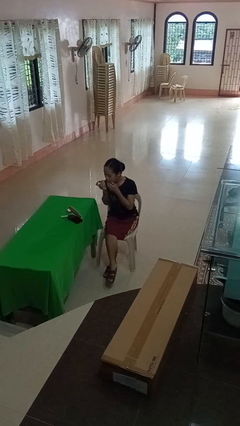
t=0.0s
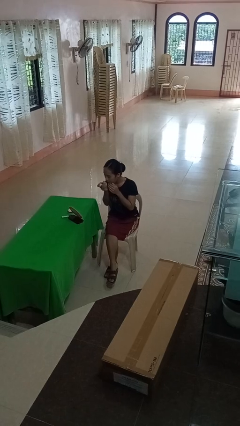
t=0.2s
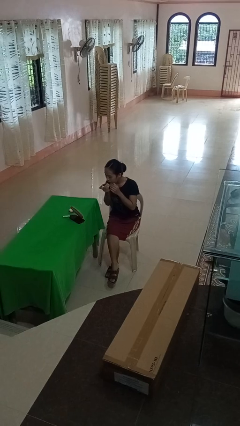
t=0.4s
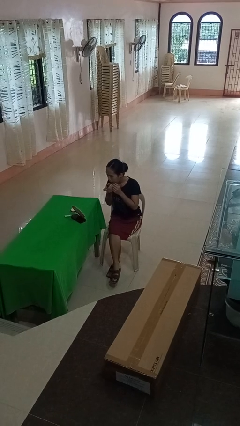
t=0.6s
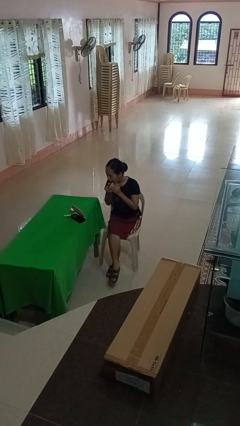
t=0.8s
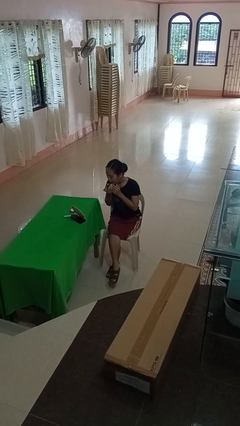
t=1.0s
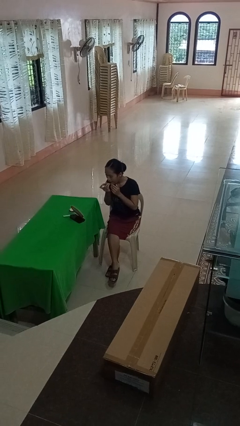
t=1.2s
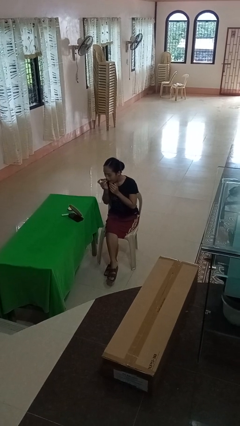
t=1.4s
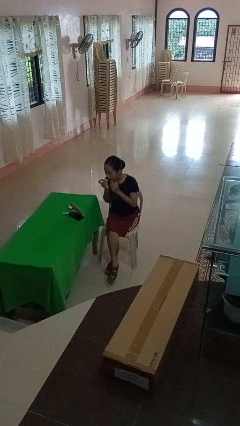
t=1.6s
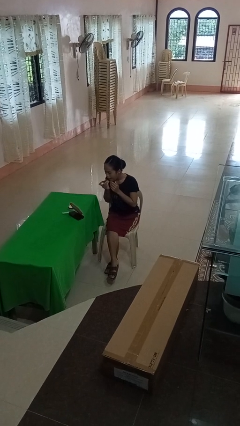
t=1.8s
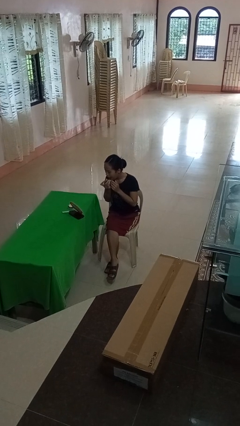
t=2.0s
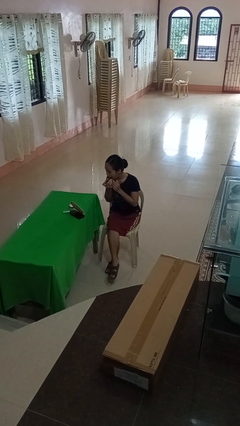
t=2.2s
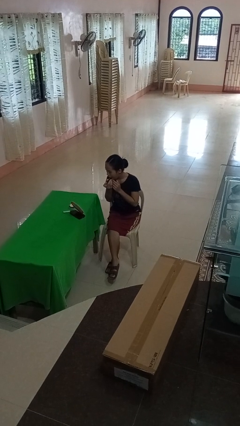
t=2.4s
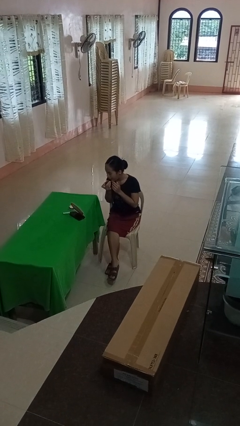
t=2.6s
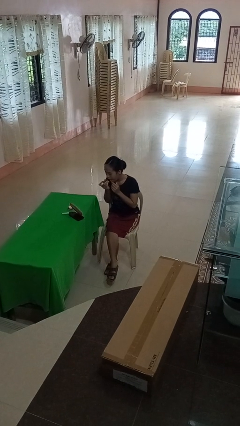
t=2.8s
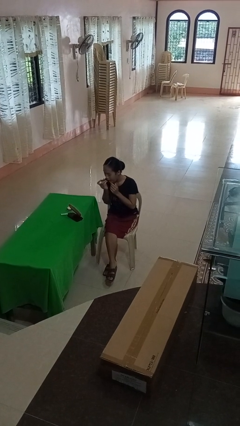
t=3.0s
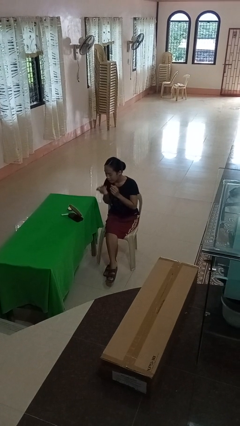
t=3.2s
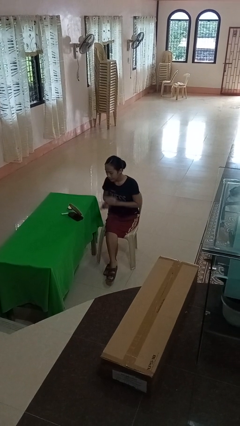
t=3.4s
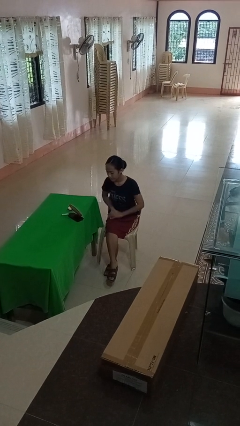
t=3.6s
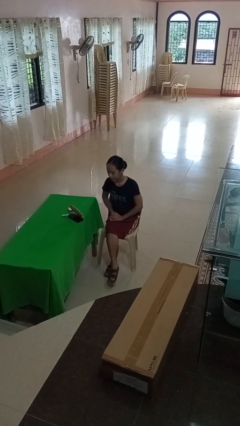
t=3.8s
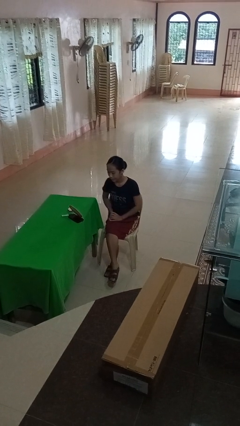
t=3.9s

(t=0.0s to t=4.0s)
person applies lip makeup

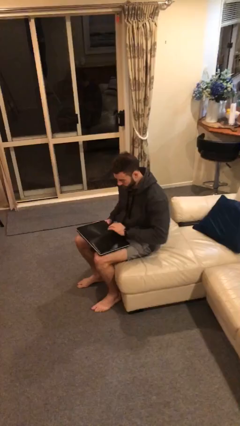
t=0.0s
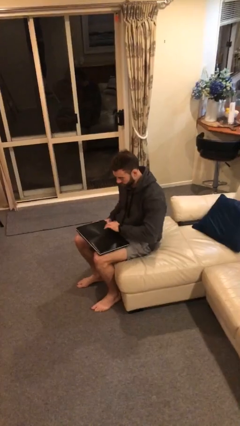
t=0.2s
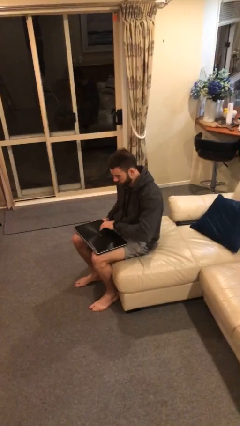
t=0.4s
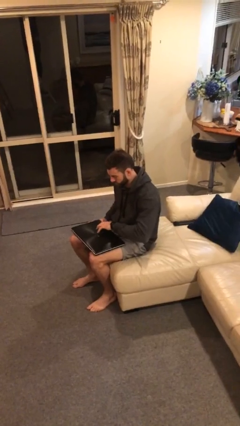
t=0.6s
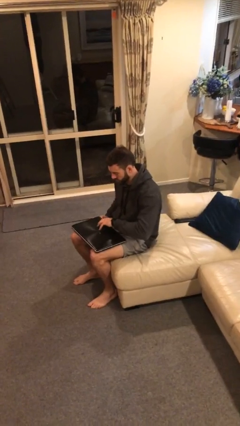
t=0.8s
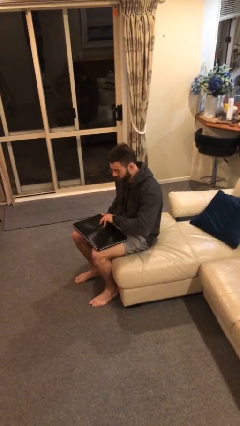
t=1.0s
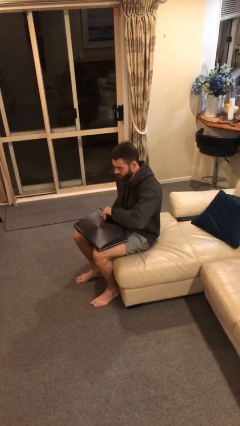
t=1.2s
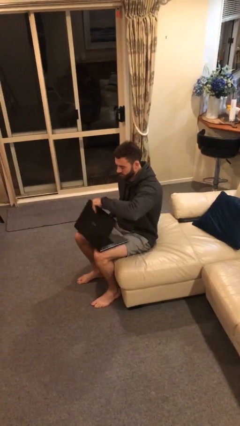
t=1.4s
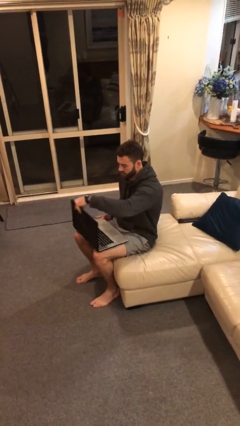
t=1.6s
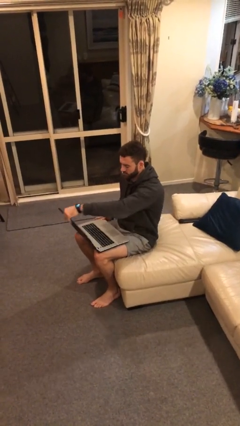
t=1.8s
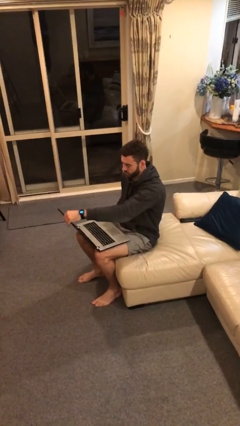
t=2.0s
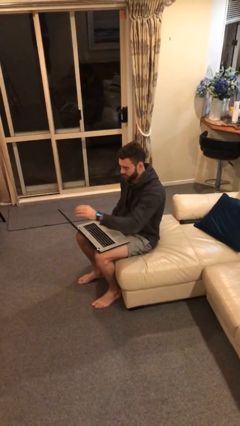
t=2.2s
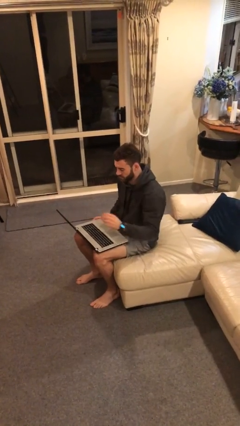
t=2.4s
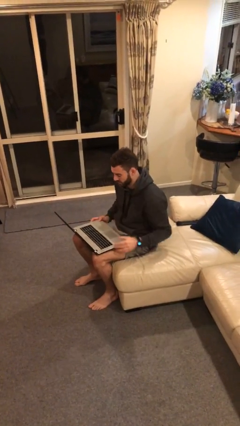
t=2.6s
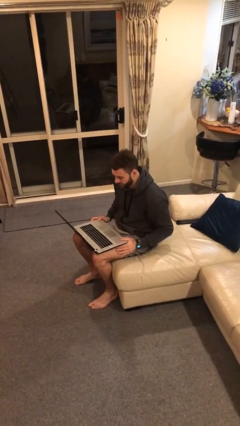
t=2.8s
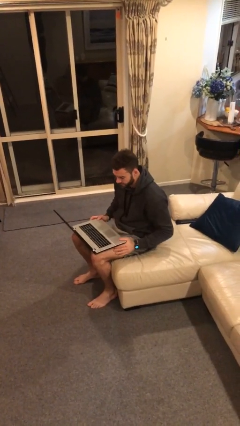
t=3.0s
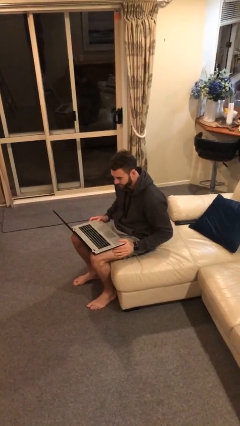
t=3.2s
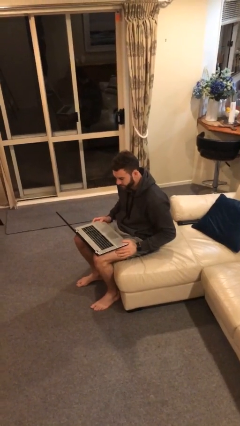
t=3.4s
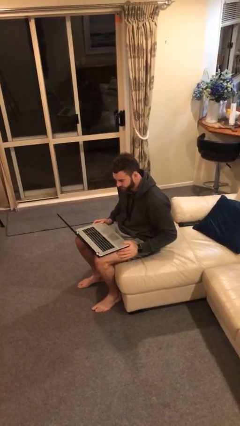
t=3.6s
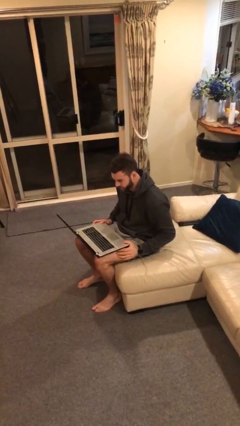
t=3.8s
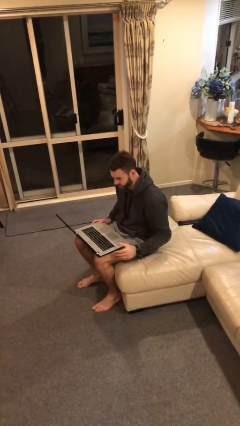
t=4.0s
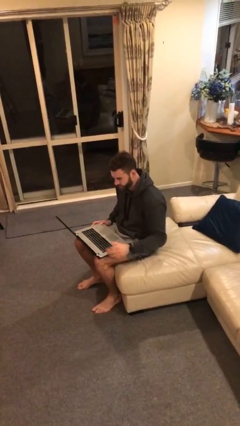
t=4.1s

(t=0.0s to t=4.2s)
person opens laptop

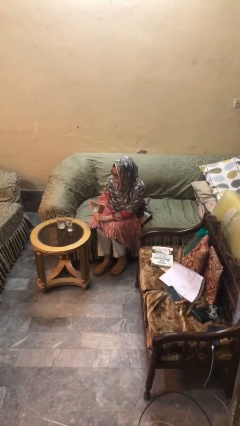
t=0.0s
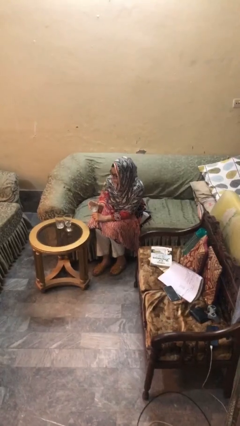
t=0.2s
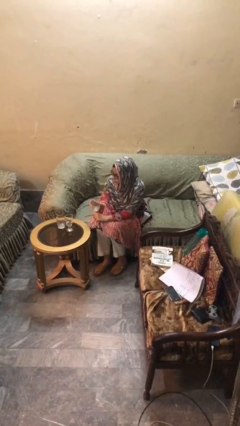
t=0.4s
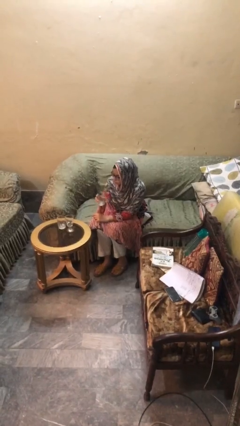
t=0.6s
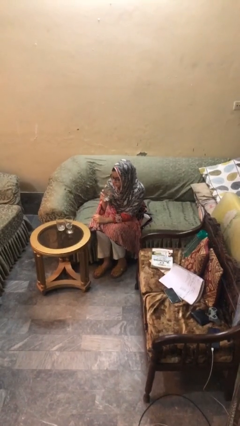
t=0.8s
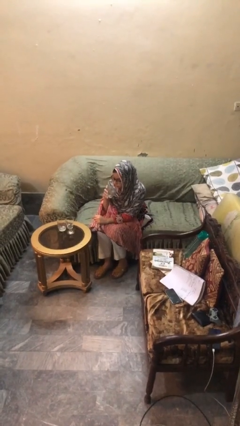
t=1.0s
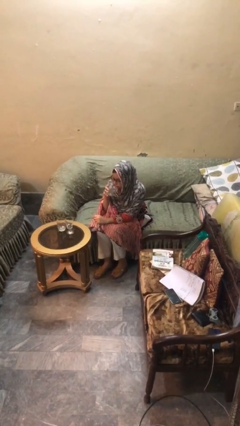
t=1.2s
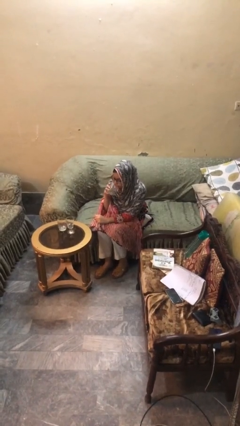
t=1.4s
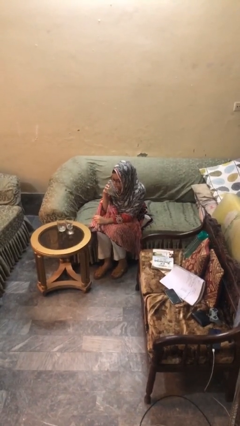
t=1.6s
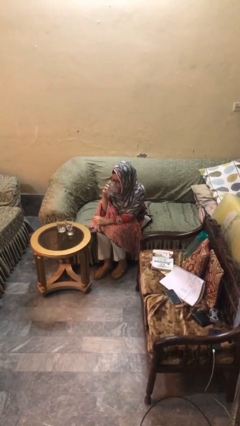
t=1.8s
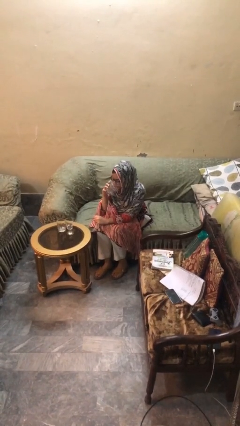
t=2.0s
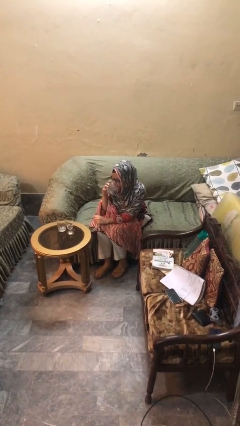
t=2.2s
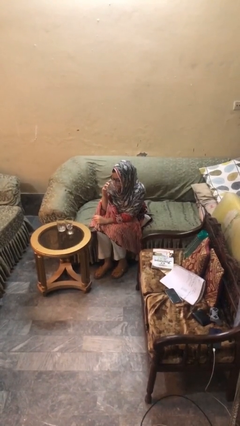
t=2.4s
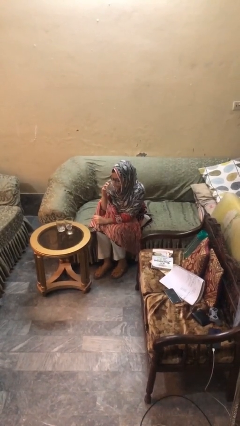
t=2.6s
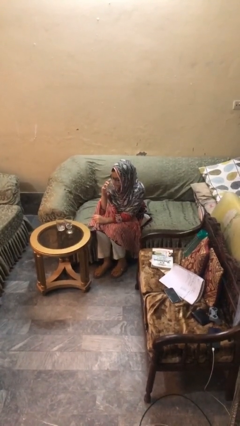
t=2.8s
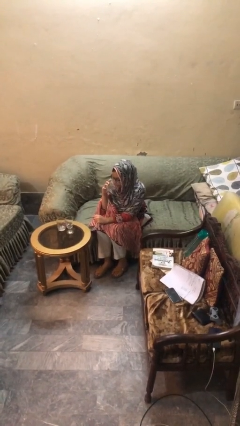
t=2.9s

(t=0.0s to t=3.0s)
person drinks from shotglass

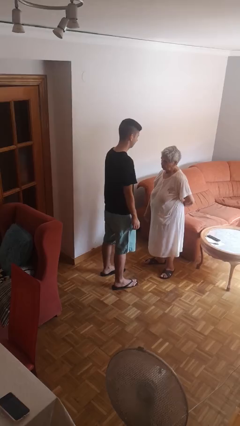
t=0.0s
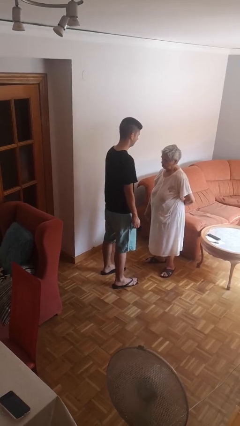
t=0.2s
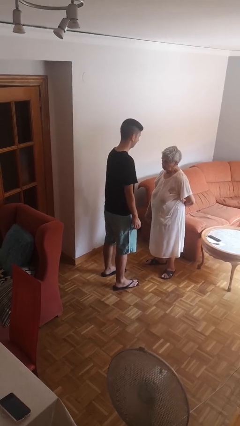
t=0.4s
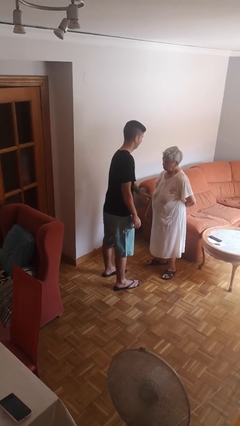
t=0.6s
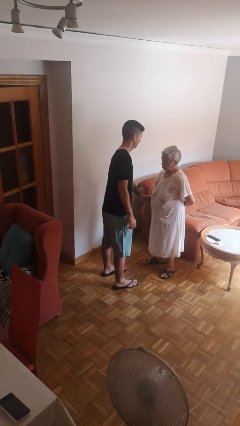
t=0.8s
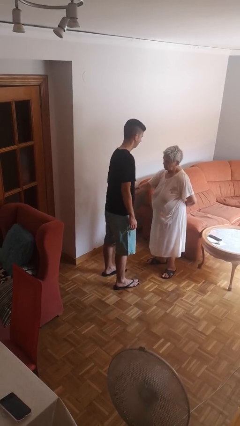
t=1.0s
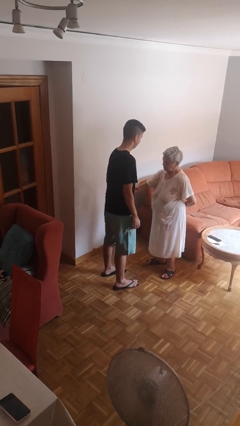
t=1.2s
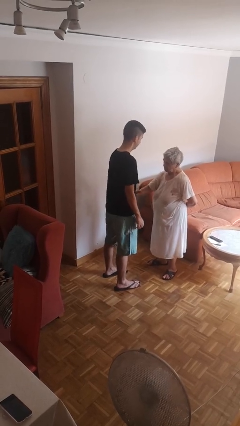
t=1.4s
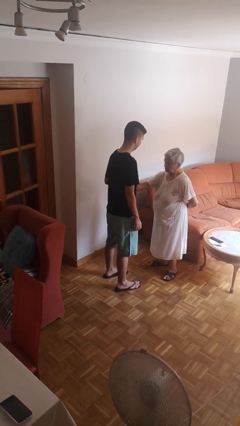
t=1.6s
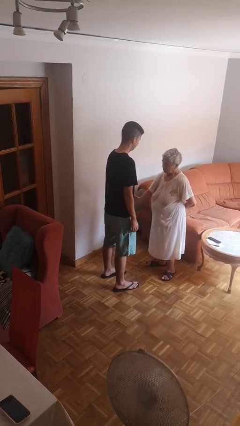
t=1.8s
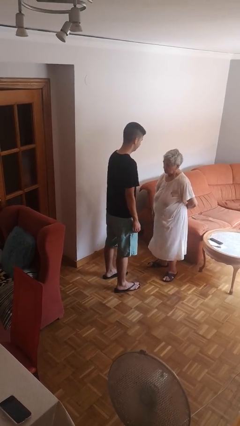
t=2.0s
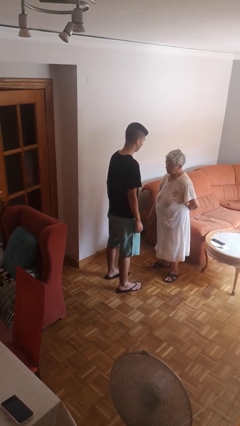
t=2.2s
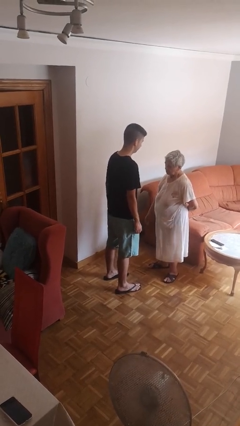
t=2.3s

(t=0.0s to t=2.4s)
person grabs person by forearm

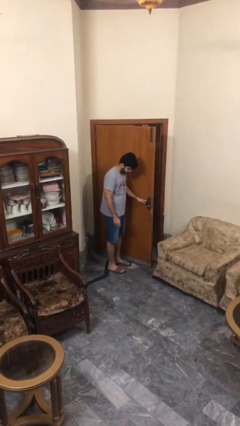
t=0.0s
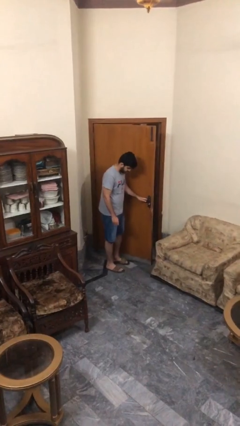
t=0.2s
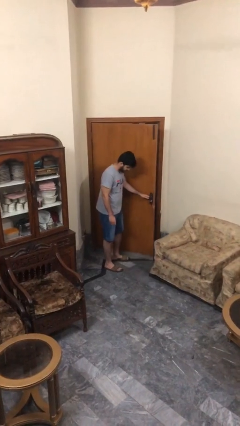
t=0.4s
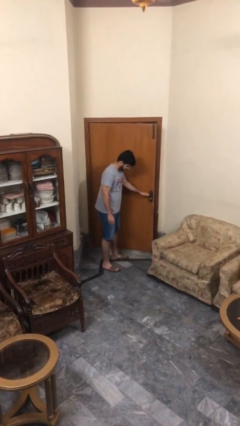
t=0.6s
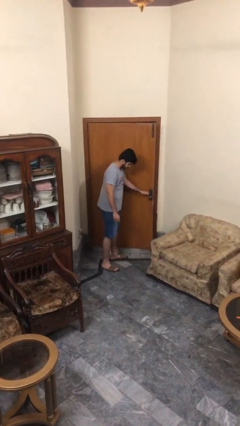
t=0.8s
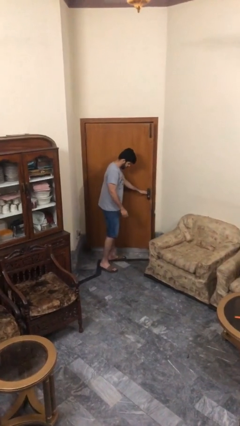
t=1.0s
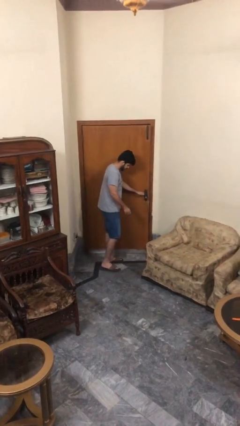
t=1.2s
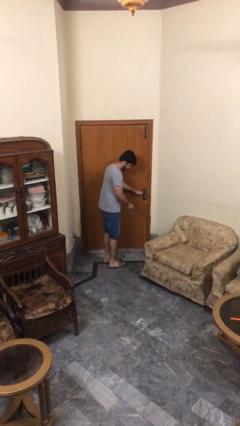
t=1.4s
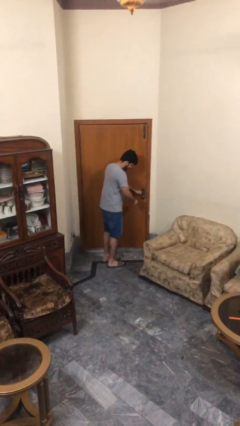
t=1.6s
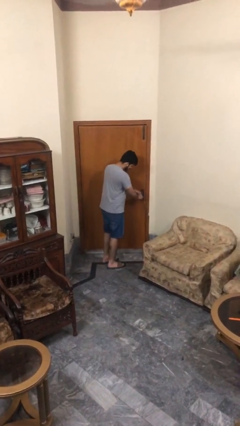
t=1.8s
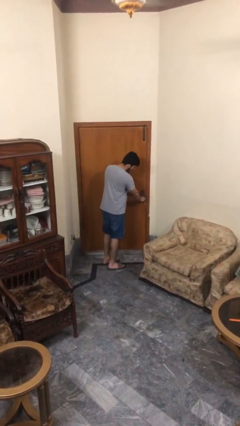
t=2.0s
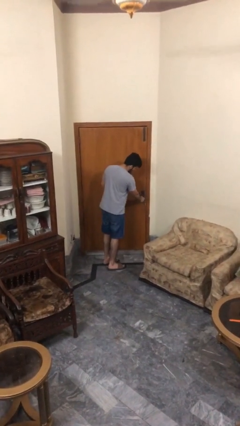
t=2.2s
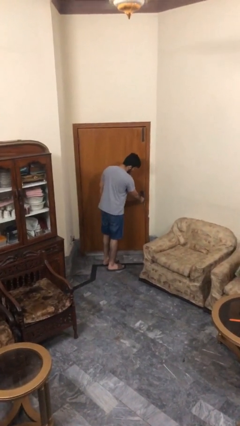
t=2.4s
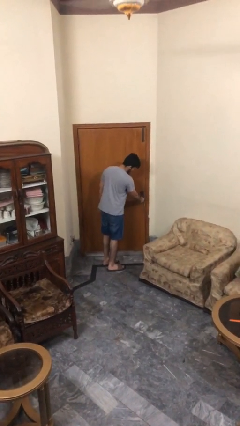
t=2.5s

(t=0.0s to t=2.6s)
person closes facility door

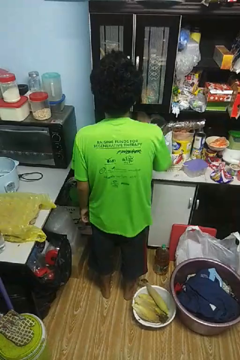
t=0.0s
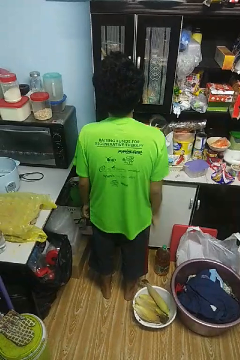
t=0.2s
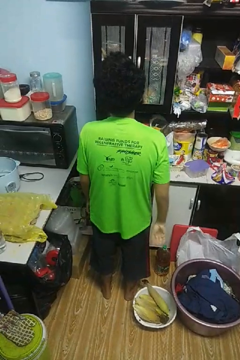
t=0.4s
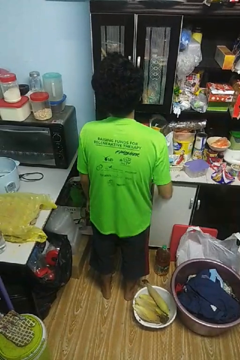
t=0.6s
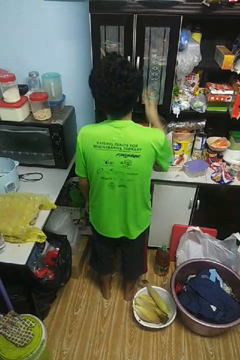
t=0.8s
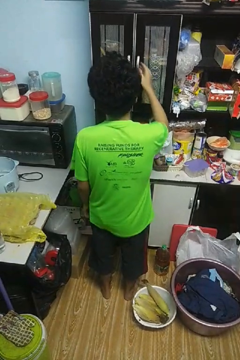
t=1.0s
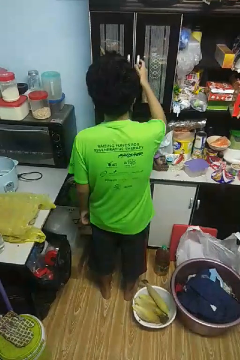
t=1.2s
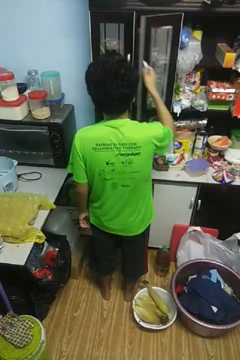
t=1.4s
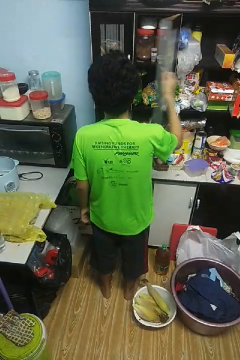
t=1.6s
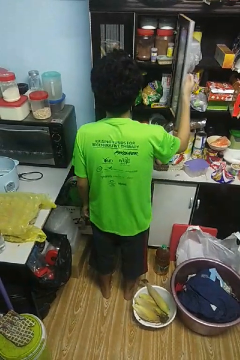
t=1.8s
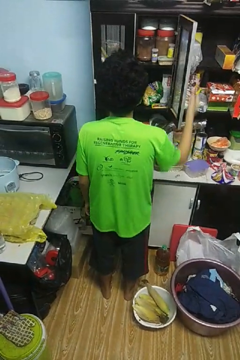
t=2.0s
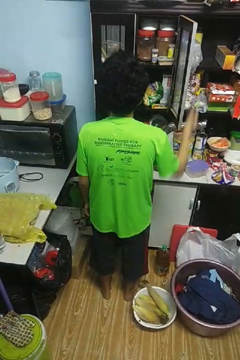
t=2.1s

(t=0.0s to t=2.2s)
person opens cabinet
